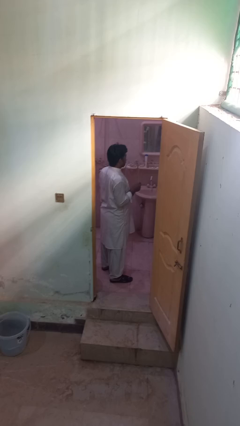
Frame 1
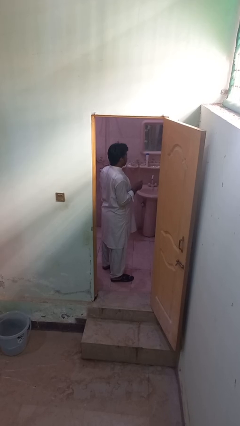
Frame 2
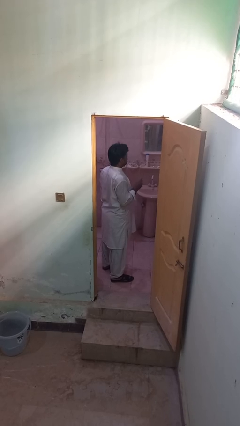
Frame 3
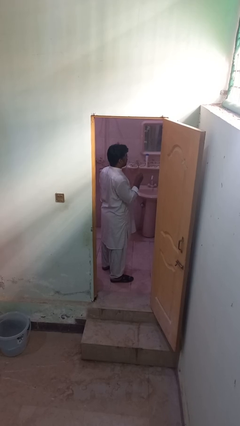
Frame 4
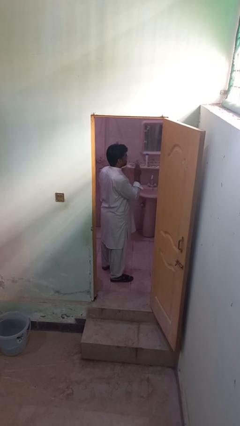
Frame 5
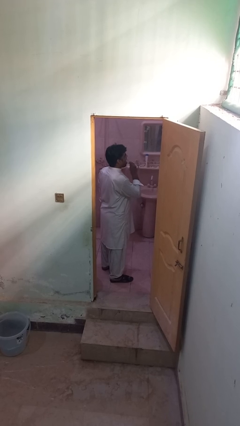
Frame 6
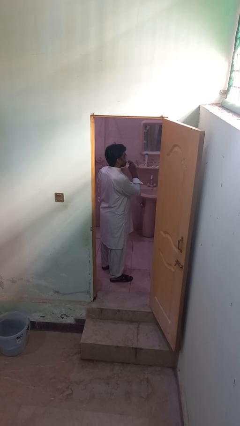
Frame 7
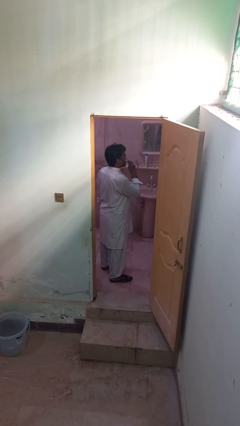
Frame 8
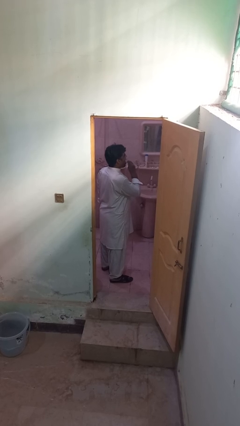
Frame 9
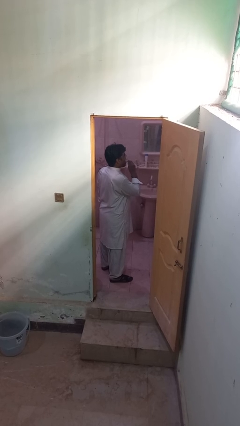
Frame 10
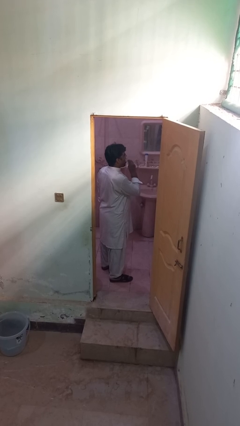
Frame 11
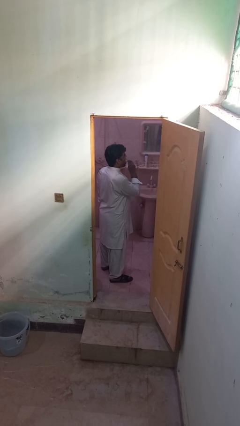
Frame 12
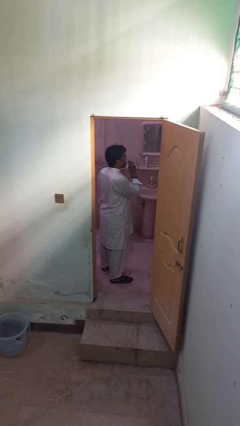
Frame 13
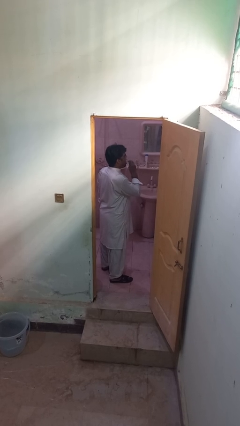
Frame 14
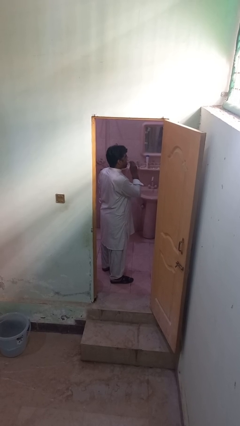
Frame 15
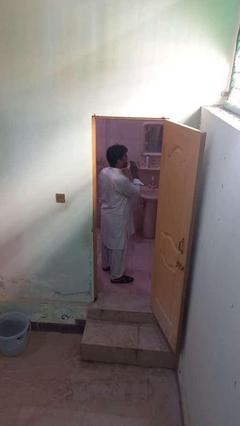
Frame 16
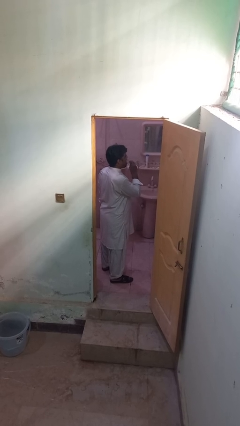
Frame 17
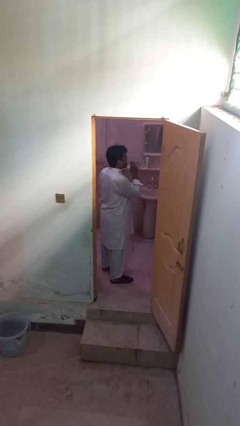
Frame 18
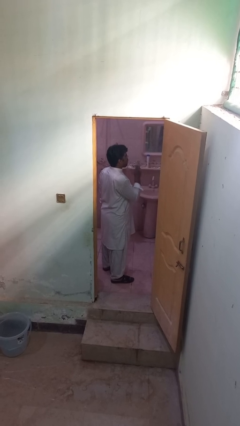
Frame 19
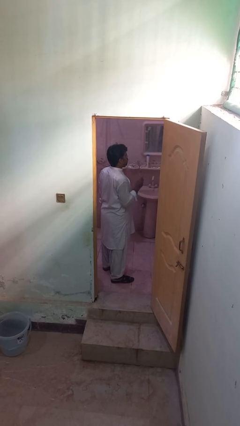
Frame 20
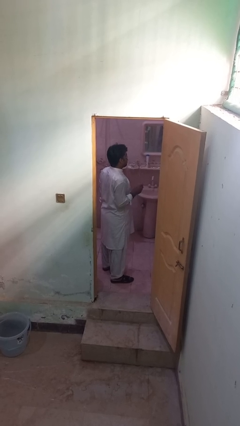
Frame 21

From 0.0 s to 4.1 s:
person flosses

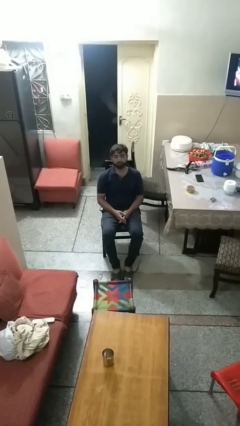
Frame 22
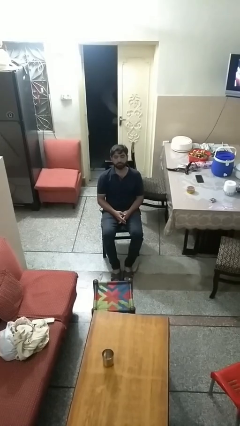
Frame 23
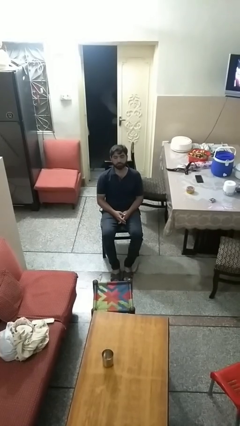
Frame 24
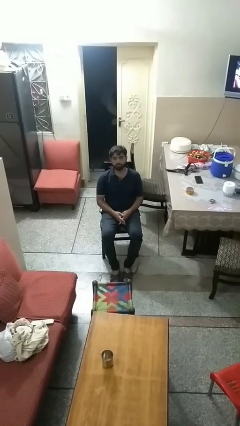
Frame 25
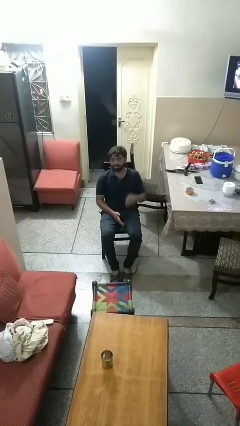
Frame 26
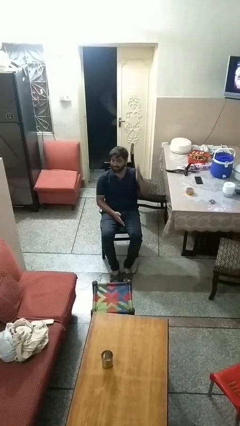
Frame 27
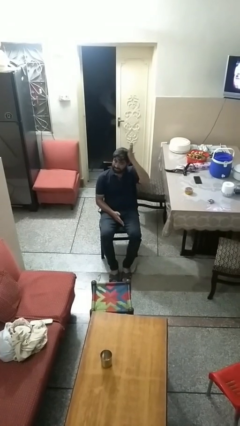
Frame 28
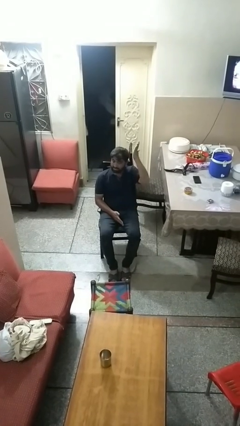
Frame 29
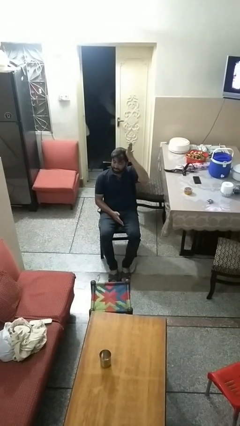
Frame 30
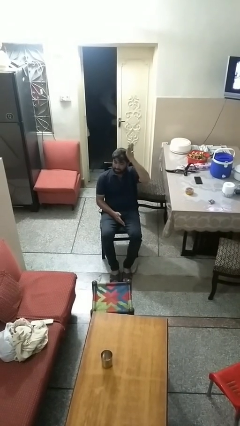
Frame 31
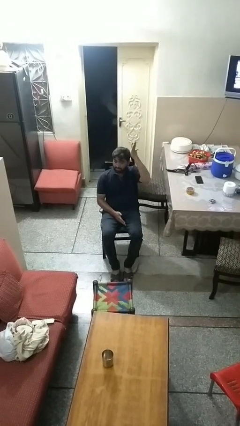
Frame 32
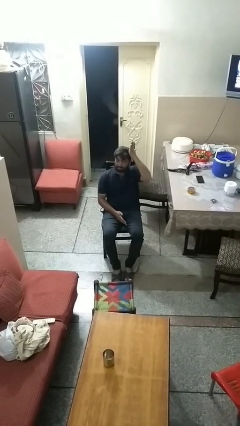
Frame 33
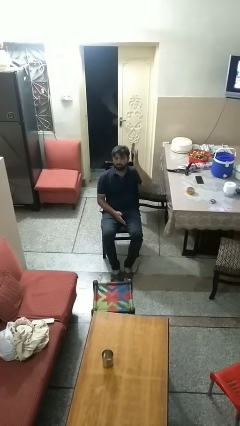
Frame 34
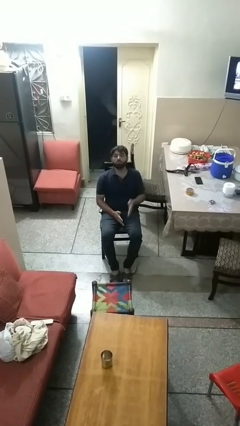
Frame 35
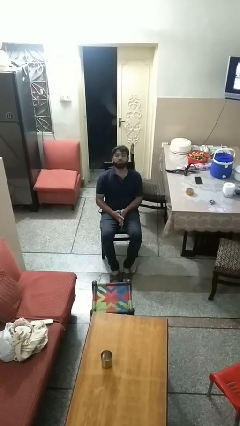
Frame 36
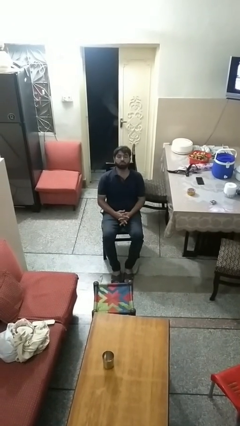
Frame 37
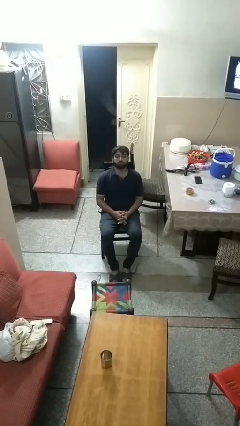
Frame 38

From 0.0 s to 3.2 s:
person pats head

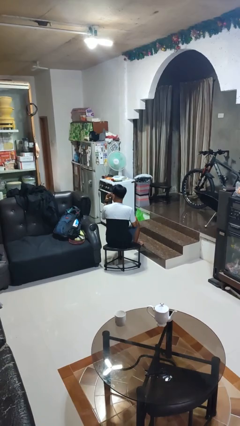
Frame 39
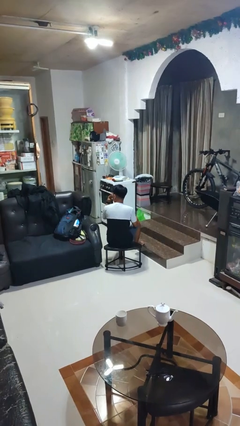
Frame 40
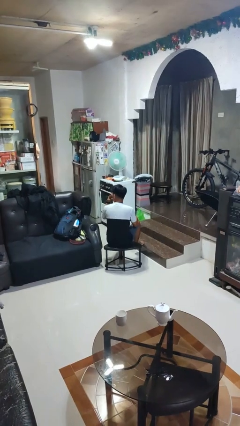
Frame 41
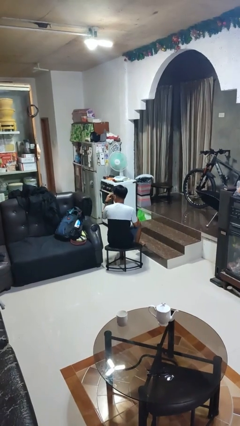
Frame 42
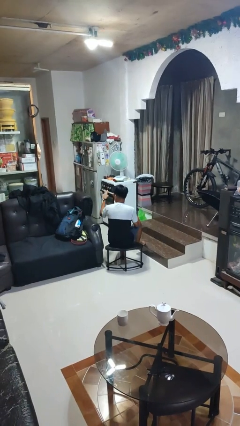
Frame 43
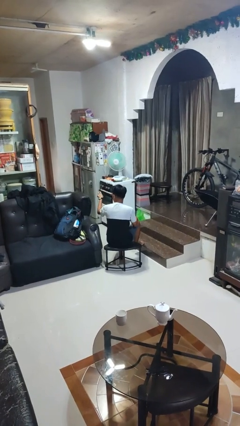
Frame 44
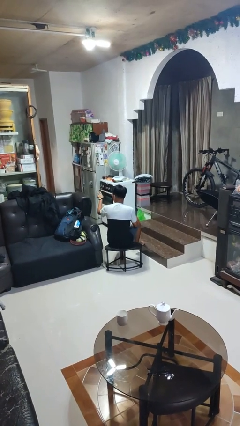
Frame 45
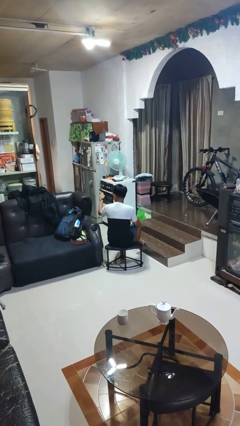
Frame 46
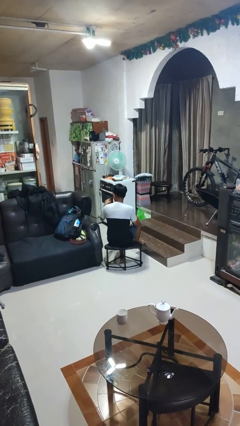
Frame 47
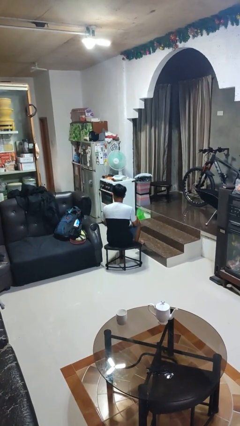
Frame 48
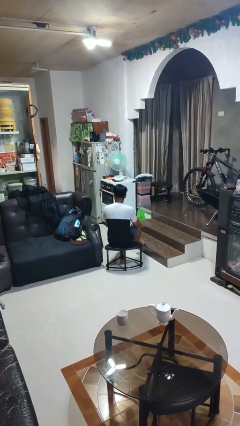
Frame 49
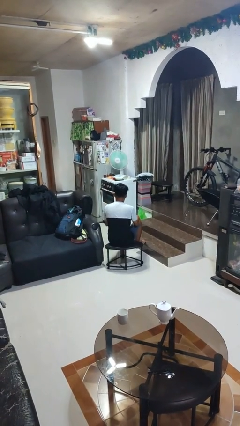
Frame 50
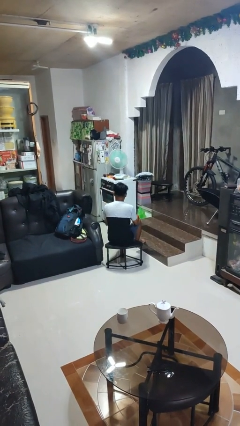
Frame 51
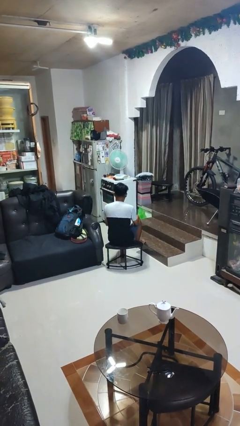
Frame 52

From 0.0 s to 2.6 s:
person gestures watch closely

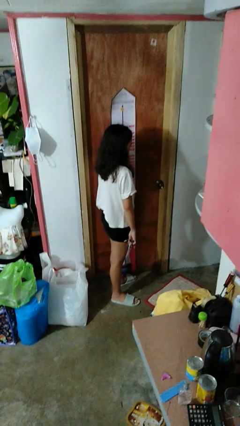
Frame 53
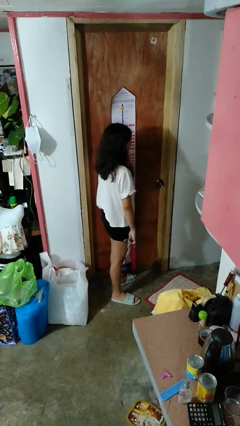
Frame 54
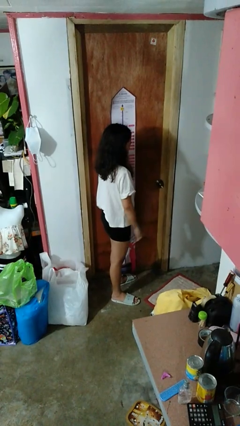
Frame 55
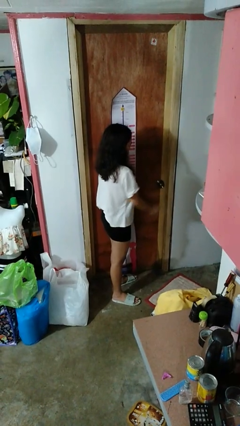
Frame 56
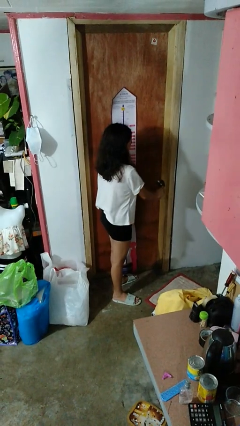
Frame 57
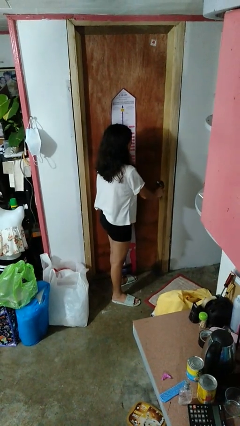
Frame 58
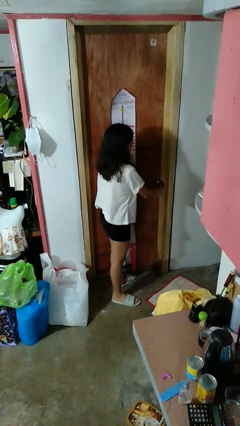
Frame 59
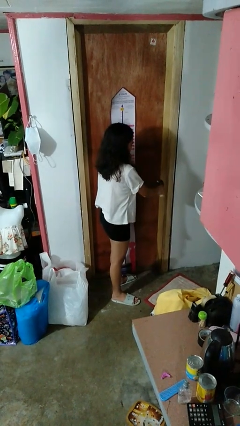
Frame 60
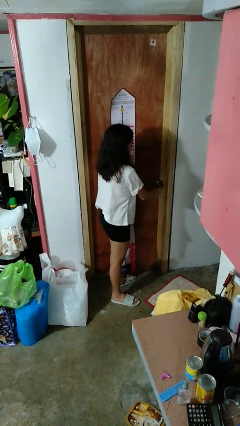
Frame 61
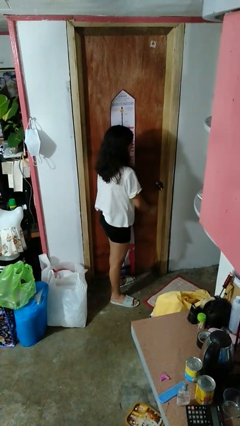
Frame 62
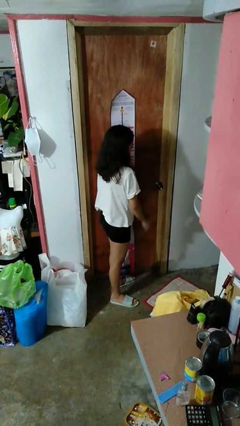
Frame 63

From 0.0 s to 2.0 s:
person unlocks door with keys

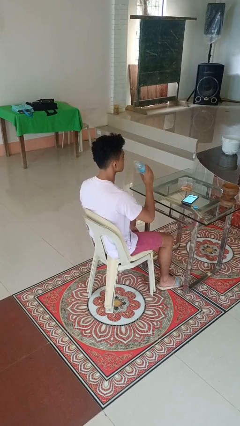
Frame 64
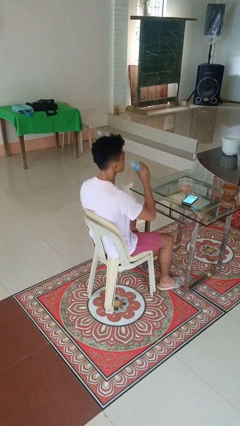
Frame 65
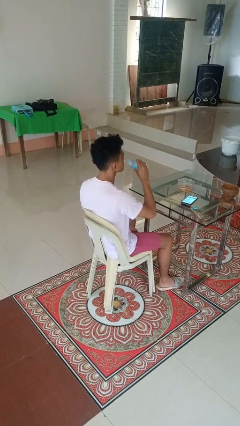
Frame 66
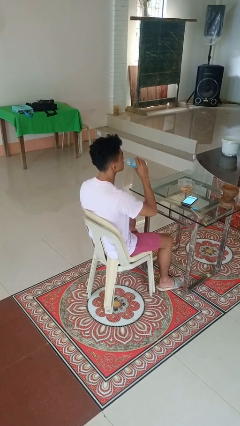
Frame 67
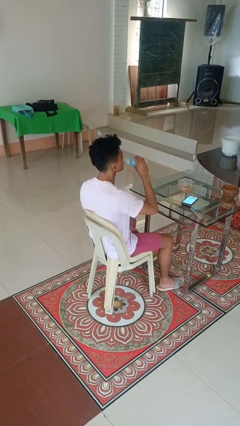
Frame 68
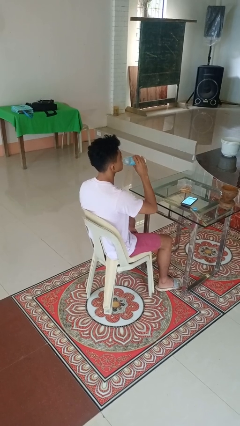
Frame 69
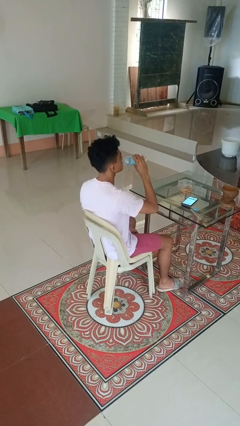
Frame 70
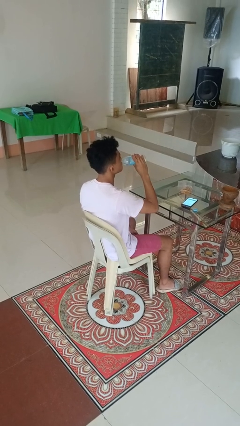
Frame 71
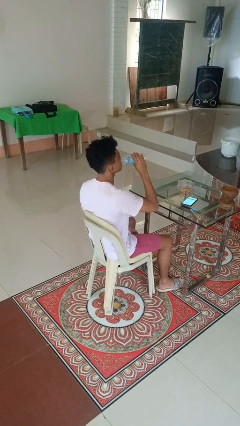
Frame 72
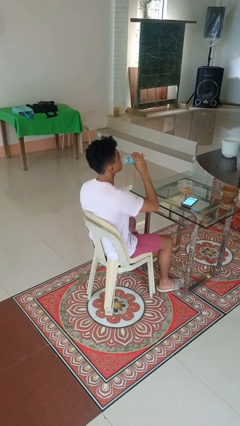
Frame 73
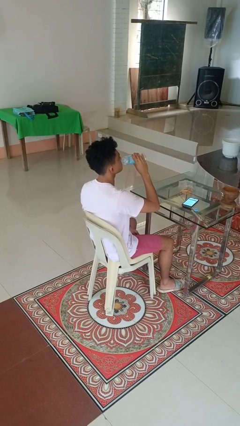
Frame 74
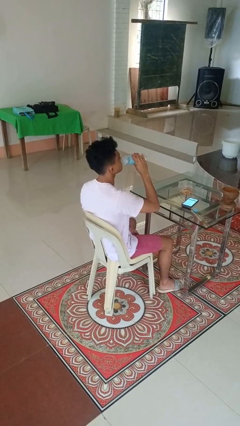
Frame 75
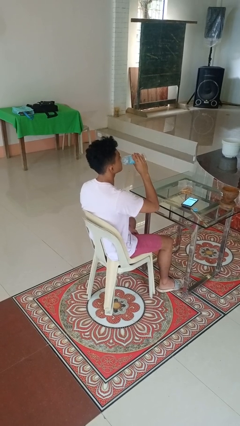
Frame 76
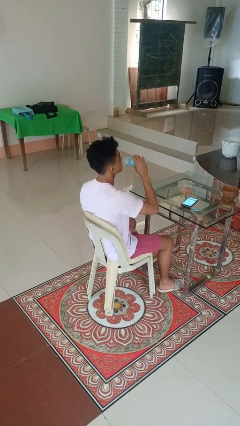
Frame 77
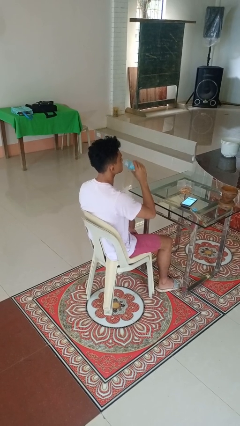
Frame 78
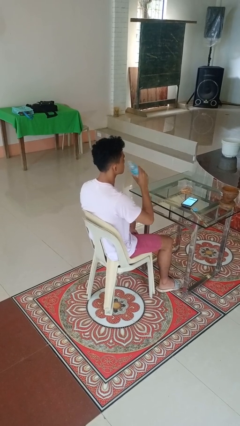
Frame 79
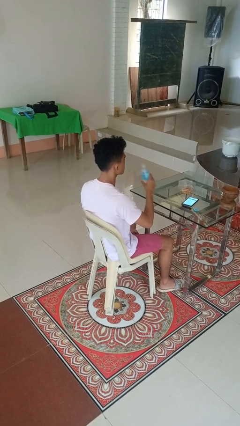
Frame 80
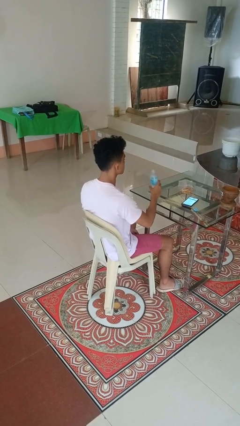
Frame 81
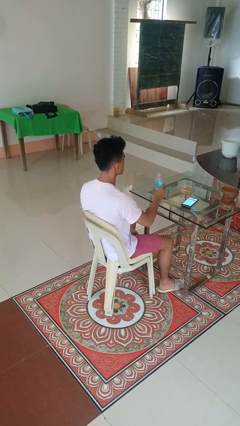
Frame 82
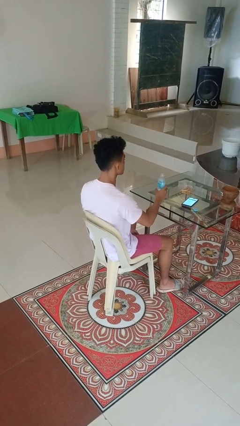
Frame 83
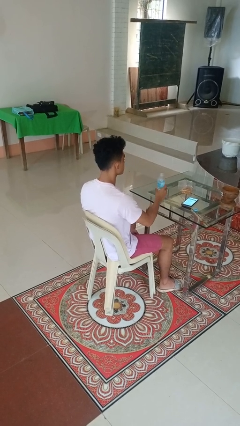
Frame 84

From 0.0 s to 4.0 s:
person drinks from bottle

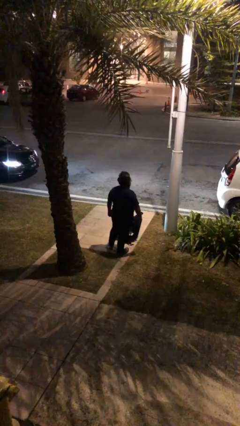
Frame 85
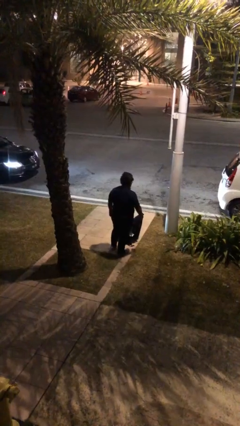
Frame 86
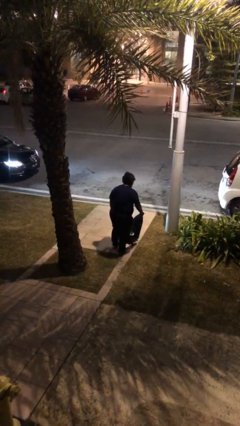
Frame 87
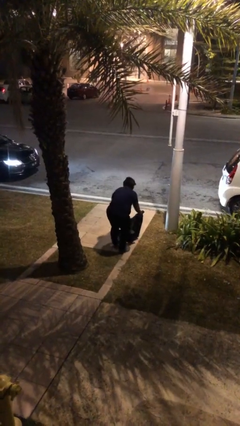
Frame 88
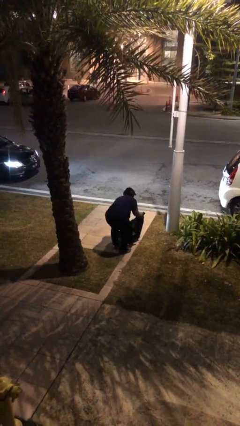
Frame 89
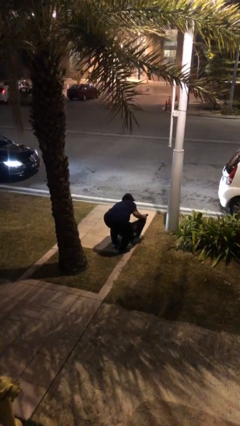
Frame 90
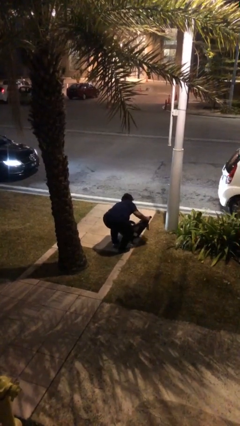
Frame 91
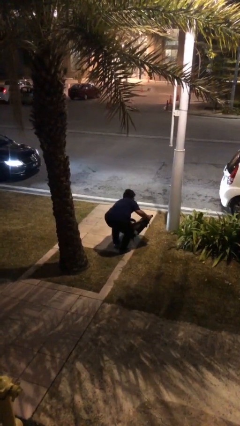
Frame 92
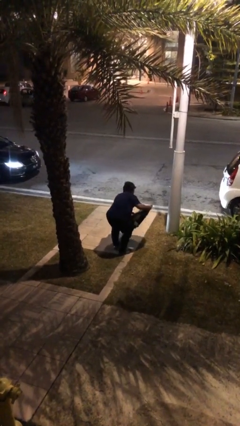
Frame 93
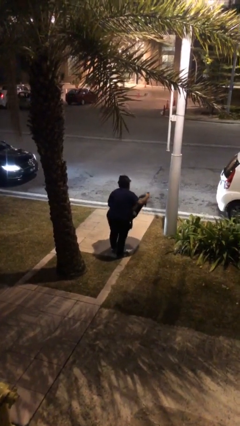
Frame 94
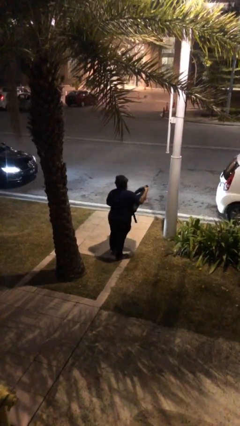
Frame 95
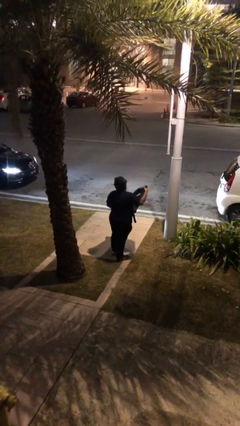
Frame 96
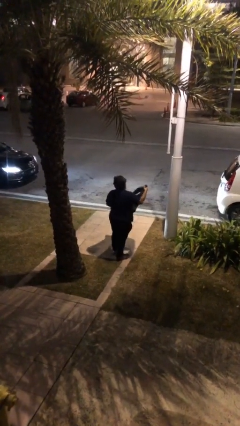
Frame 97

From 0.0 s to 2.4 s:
person picks up object from floor
